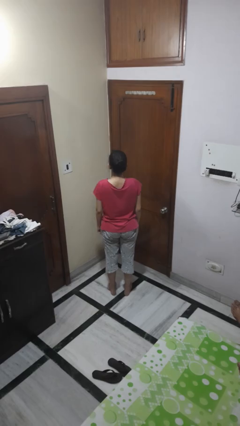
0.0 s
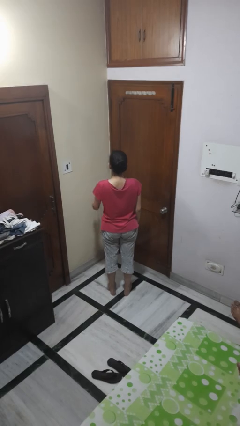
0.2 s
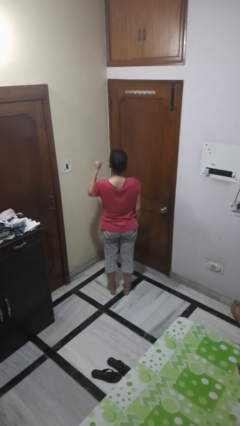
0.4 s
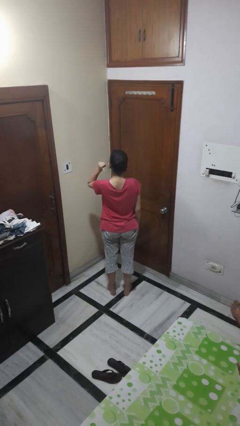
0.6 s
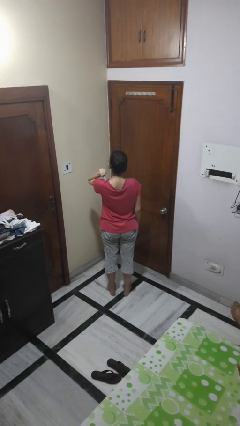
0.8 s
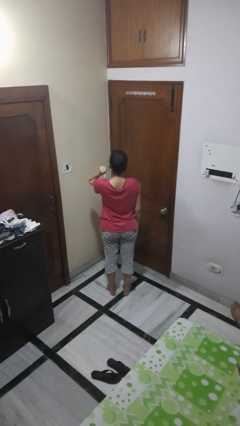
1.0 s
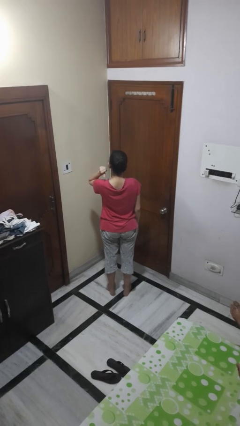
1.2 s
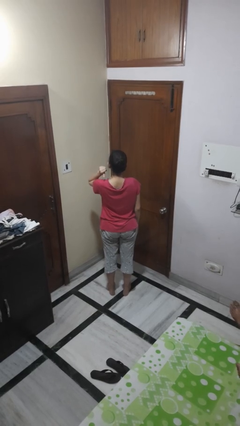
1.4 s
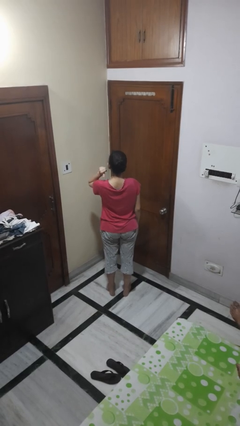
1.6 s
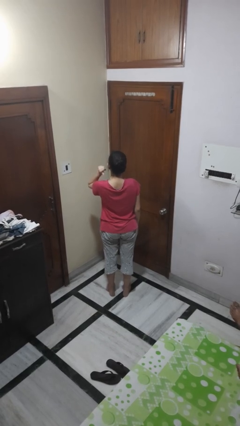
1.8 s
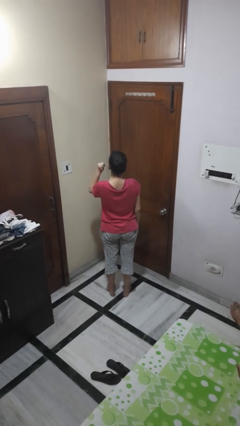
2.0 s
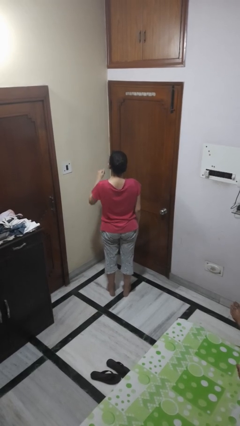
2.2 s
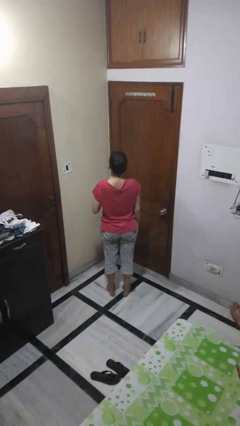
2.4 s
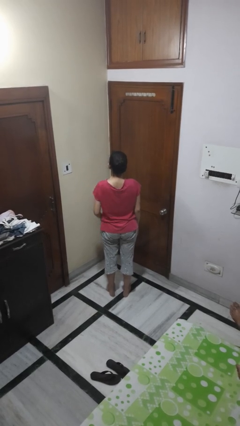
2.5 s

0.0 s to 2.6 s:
person gestures behind me

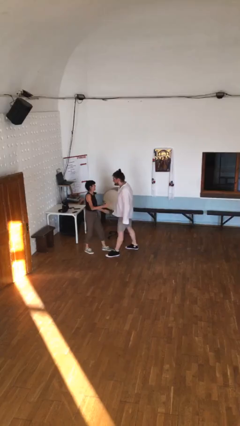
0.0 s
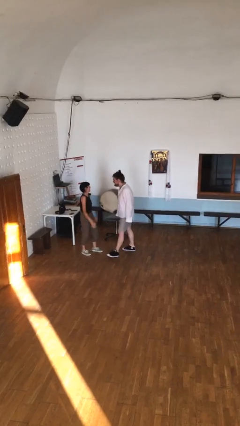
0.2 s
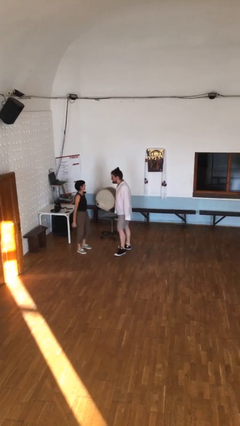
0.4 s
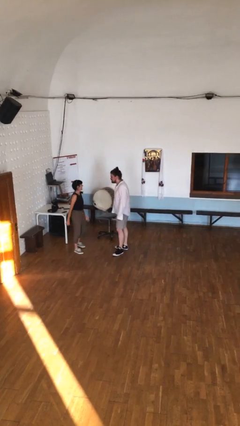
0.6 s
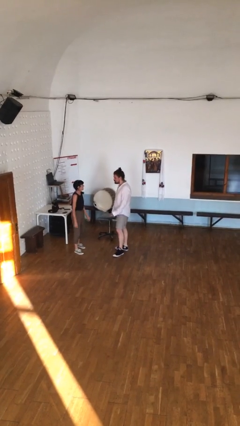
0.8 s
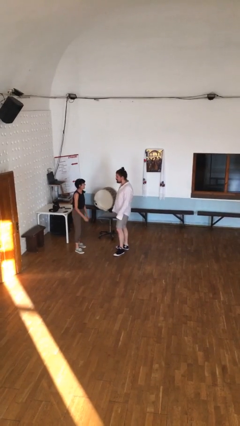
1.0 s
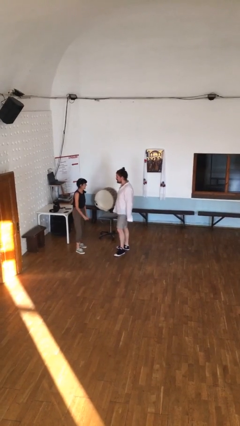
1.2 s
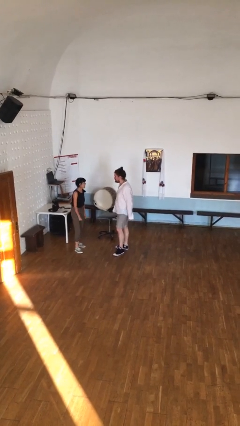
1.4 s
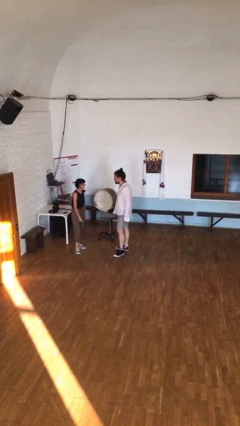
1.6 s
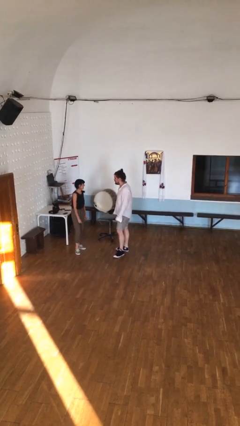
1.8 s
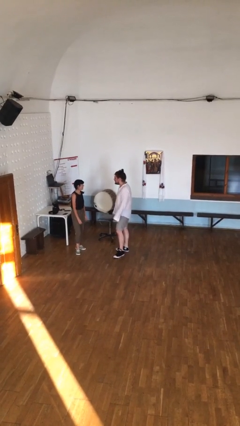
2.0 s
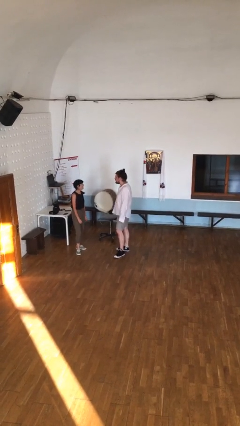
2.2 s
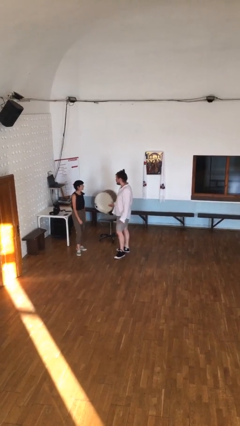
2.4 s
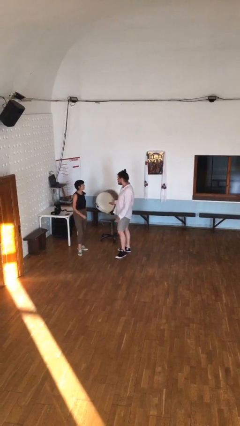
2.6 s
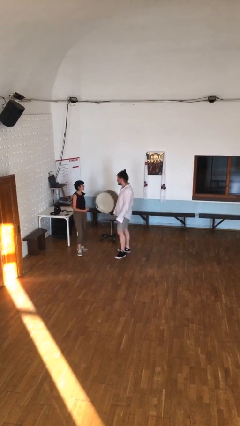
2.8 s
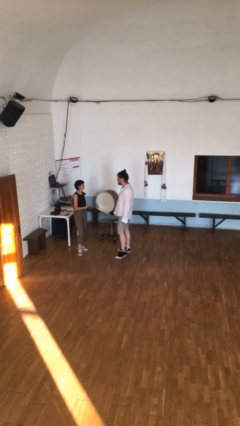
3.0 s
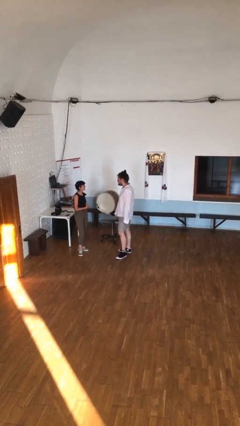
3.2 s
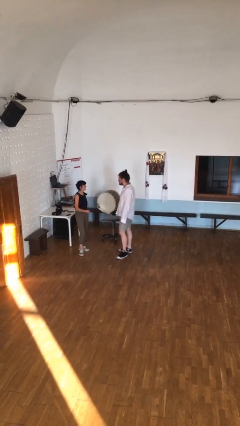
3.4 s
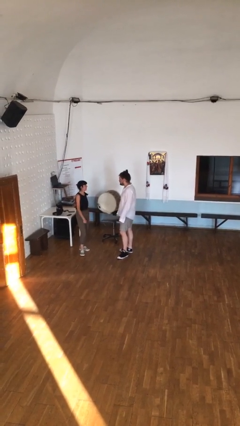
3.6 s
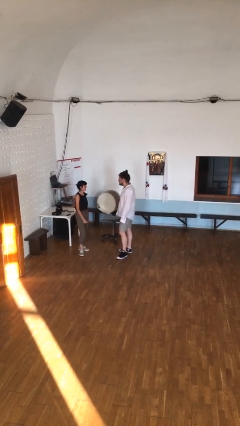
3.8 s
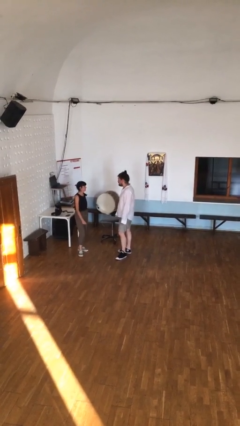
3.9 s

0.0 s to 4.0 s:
person talks to person

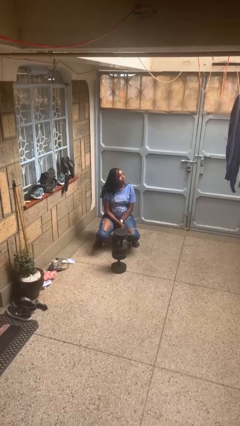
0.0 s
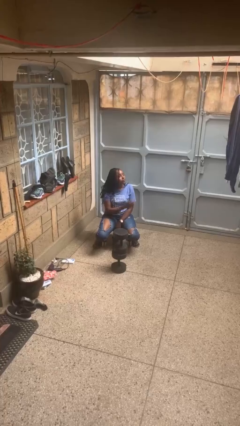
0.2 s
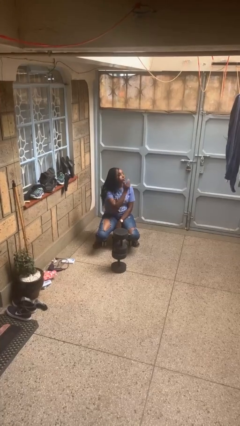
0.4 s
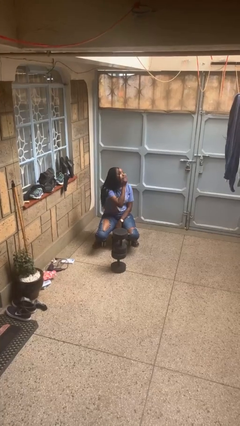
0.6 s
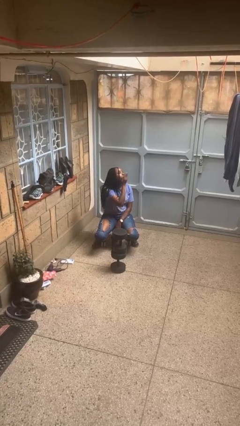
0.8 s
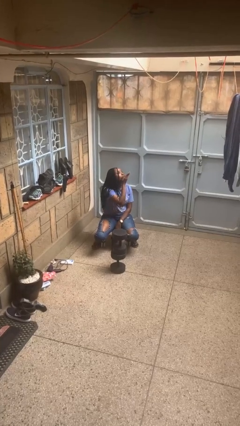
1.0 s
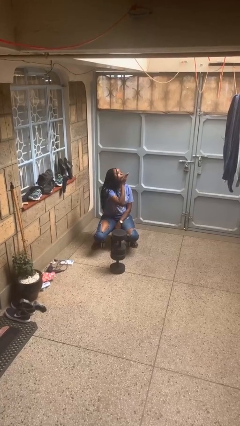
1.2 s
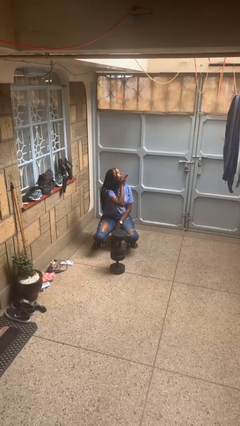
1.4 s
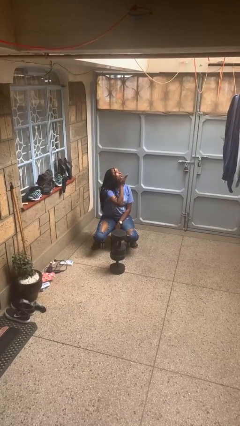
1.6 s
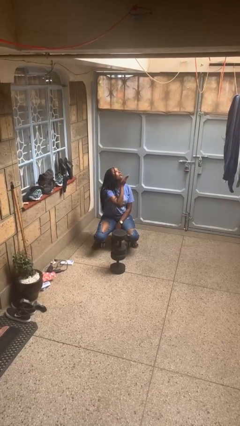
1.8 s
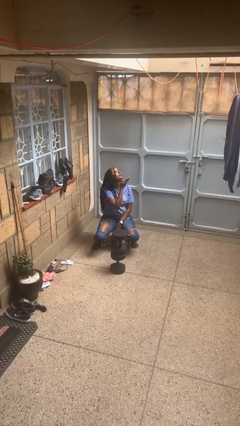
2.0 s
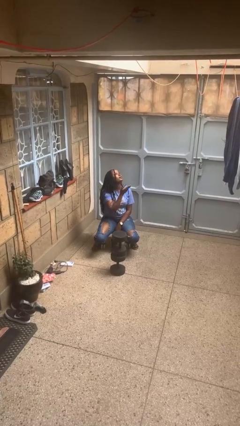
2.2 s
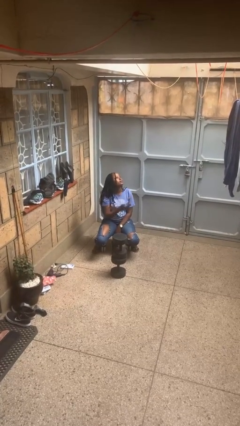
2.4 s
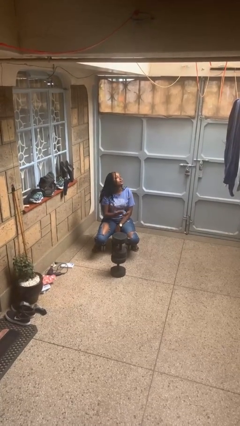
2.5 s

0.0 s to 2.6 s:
person gestures blow kiss

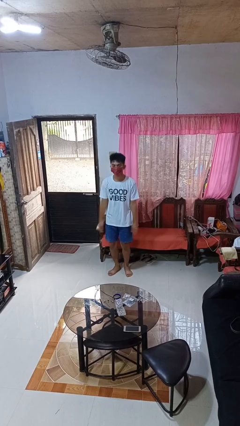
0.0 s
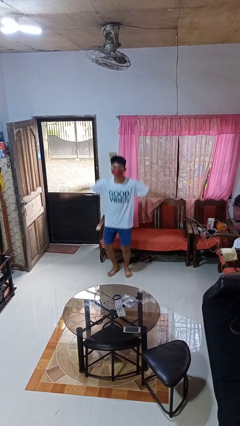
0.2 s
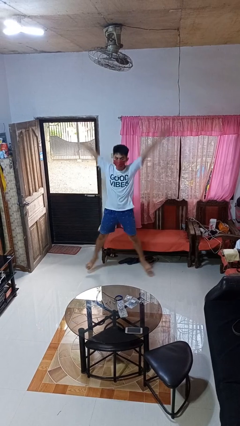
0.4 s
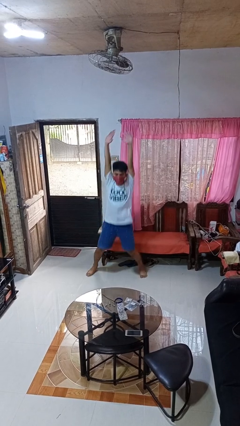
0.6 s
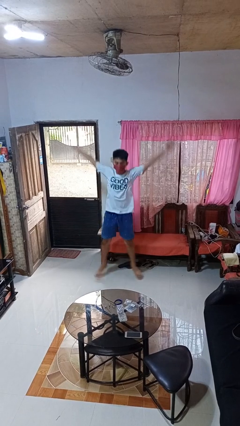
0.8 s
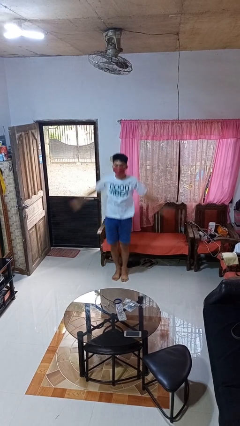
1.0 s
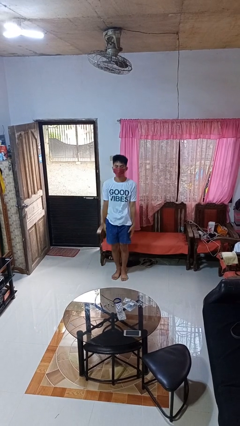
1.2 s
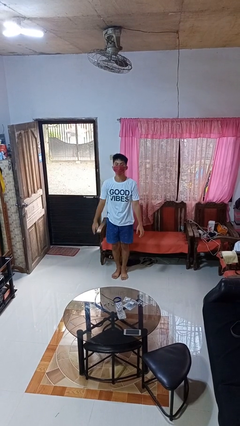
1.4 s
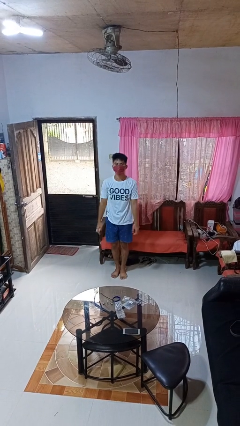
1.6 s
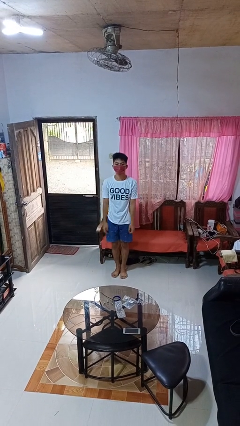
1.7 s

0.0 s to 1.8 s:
person exercises with jumping jacks

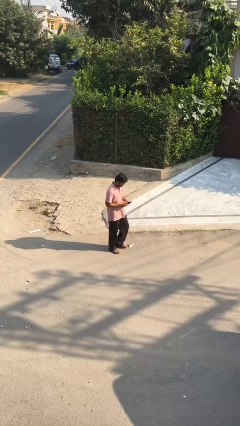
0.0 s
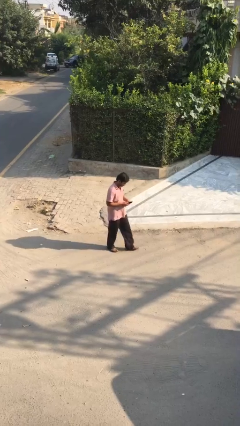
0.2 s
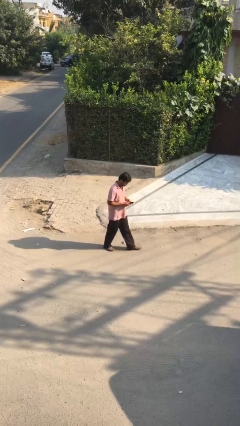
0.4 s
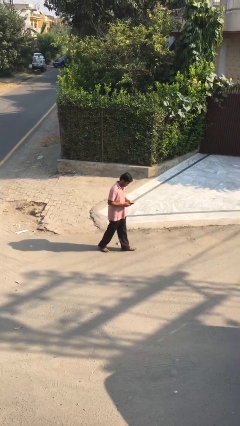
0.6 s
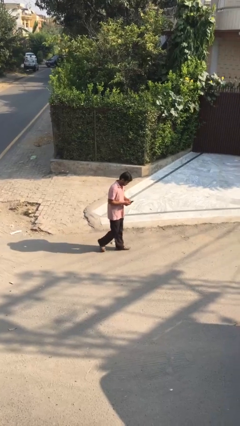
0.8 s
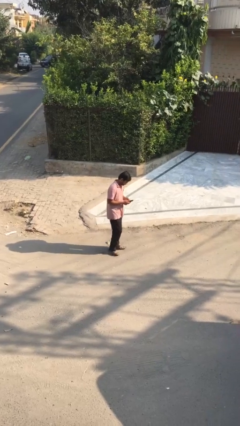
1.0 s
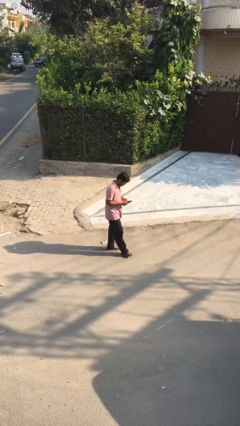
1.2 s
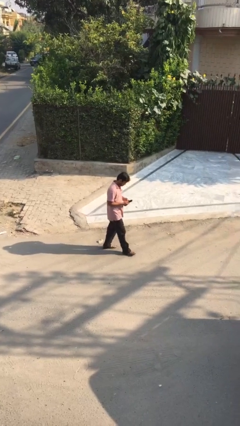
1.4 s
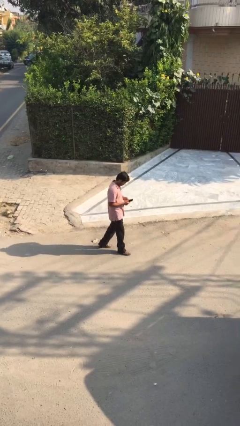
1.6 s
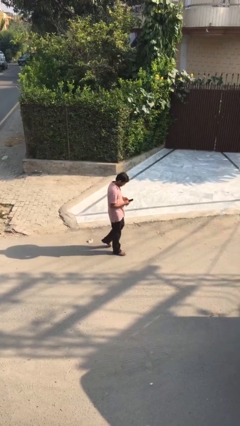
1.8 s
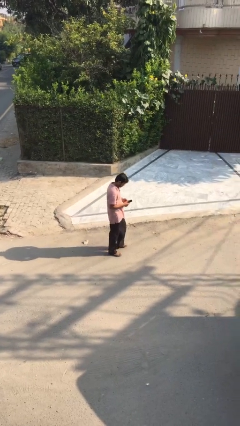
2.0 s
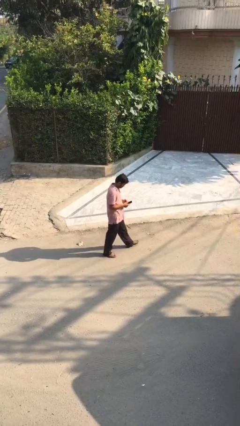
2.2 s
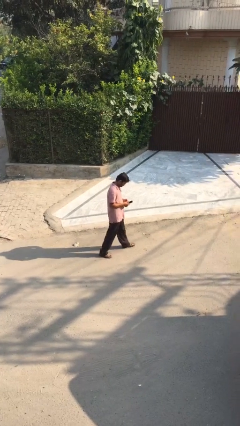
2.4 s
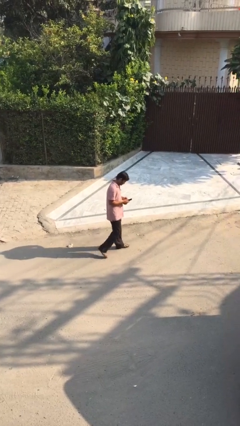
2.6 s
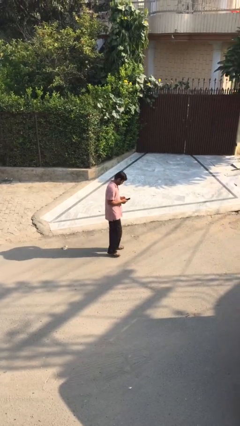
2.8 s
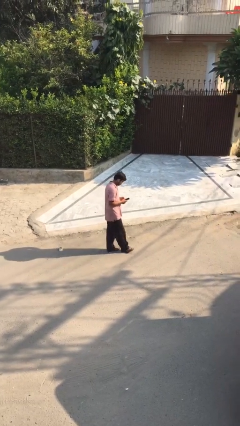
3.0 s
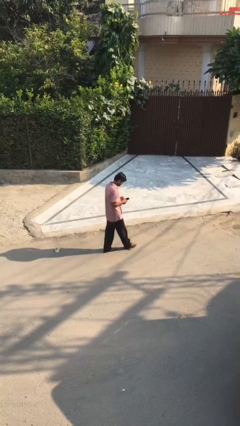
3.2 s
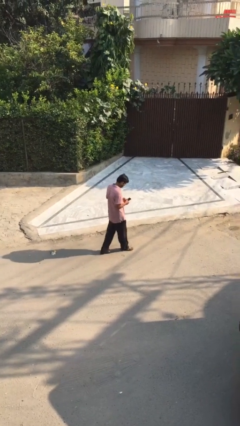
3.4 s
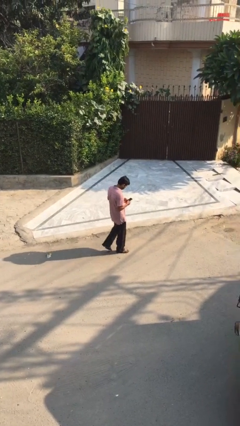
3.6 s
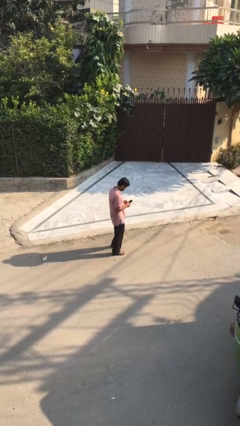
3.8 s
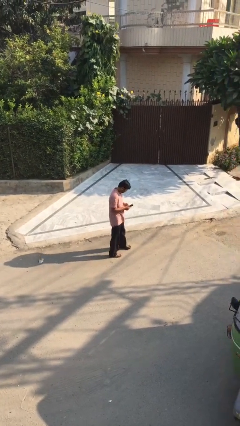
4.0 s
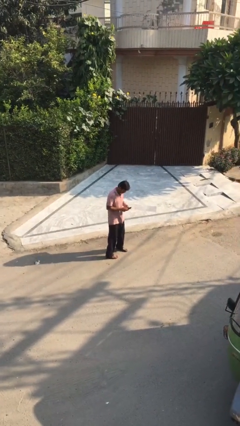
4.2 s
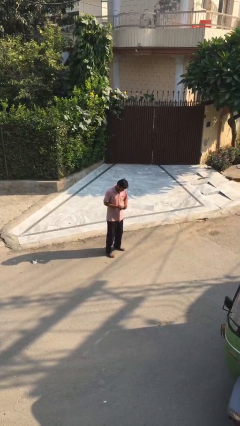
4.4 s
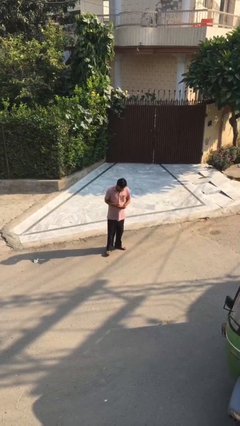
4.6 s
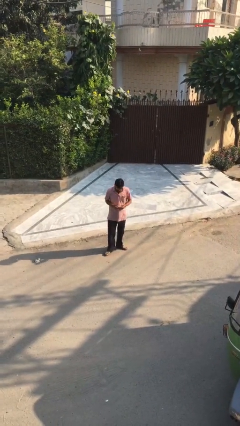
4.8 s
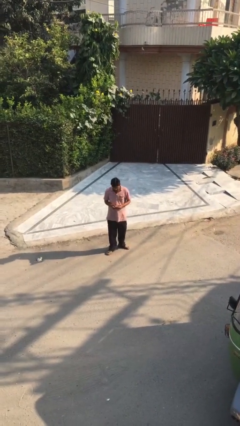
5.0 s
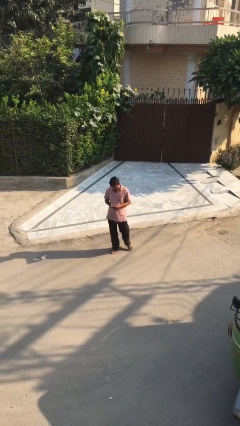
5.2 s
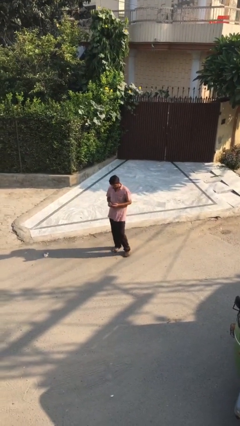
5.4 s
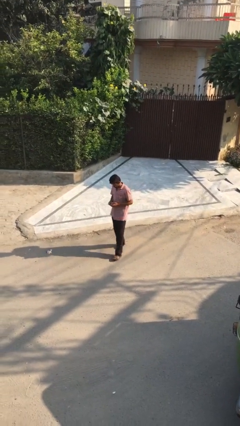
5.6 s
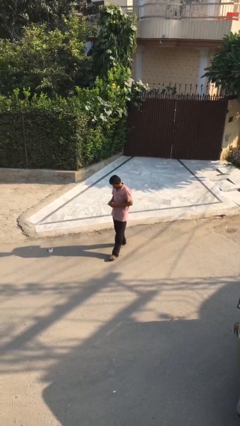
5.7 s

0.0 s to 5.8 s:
person texts on phone

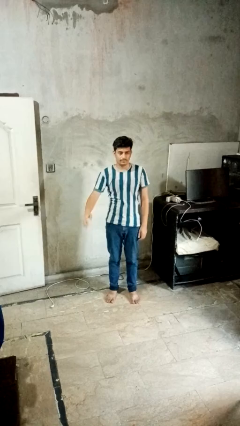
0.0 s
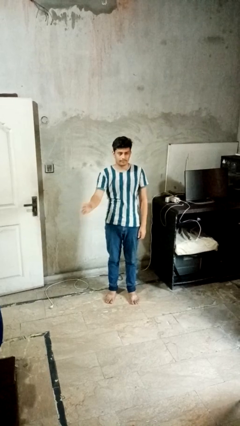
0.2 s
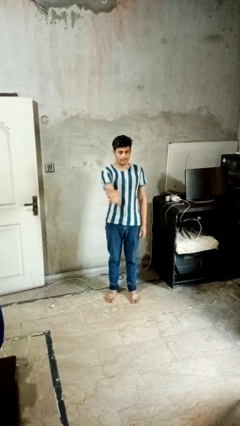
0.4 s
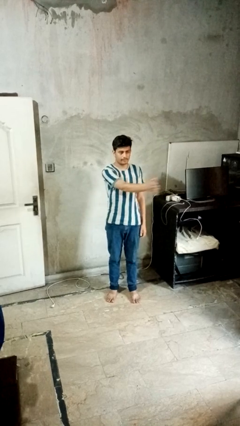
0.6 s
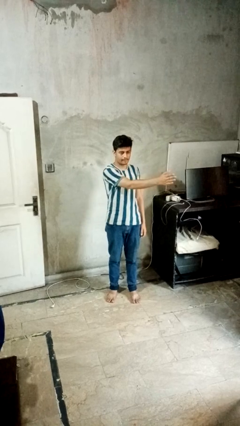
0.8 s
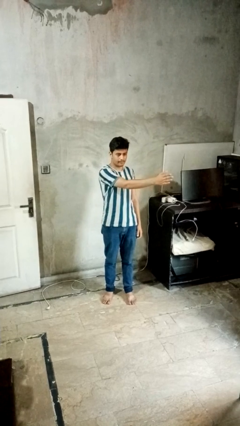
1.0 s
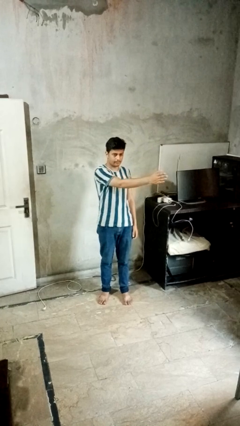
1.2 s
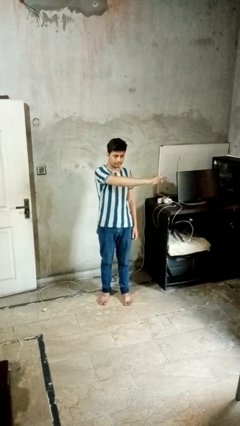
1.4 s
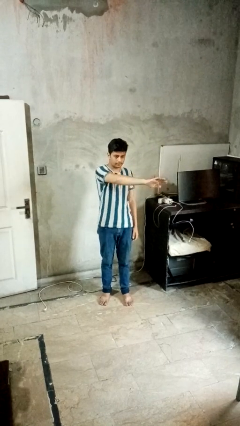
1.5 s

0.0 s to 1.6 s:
person gestures swipe left
